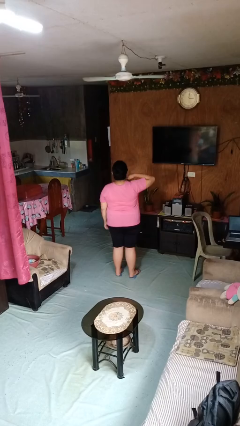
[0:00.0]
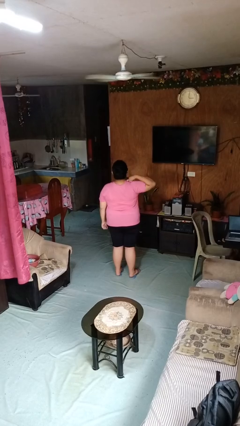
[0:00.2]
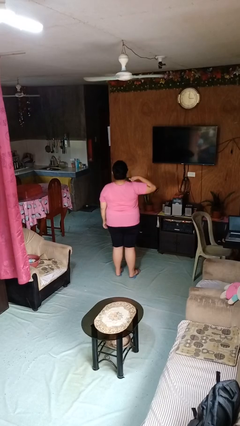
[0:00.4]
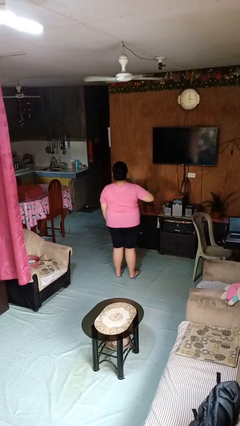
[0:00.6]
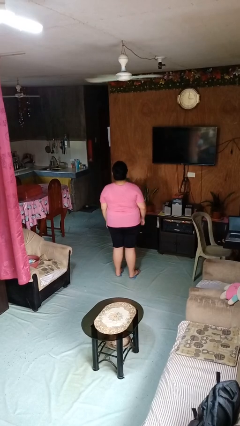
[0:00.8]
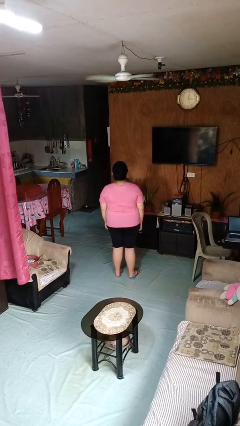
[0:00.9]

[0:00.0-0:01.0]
person gestures cut

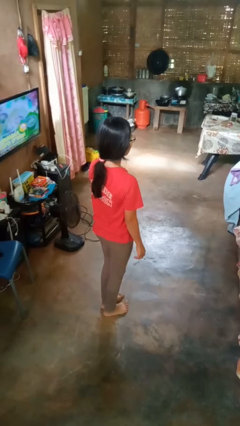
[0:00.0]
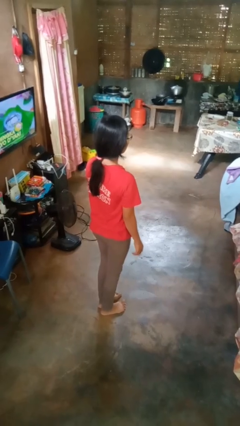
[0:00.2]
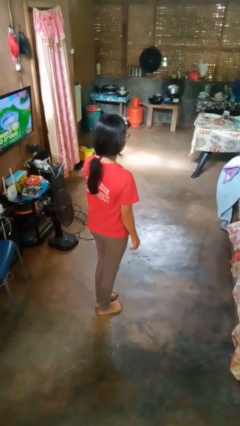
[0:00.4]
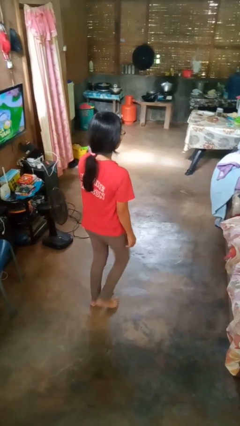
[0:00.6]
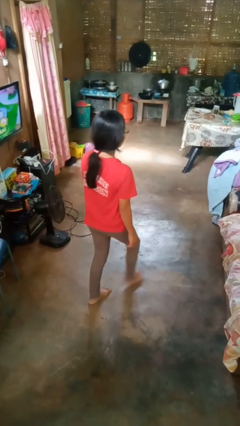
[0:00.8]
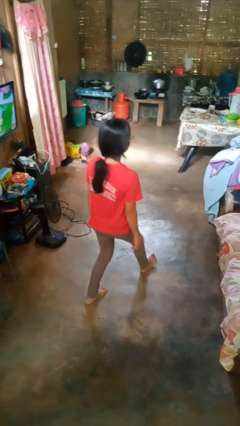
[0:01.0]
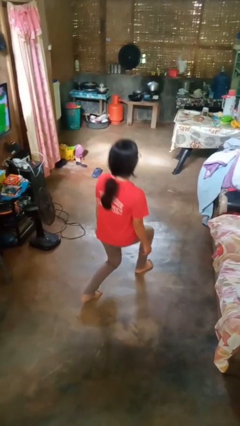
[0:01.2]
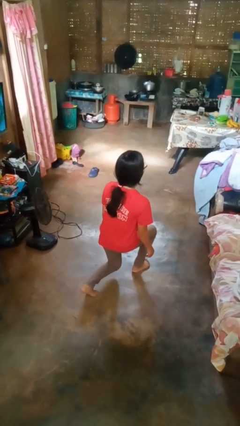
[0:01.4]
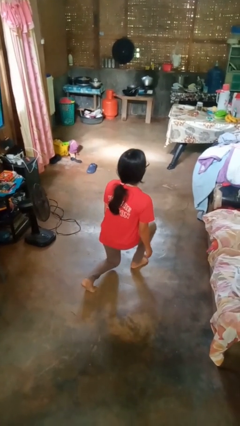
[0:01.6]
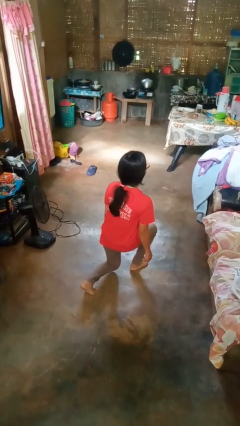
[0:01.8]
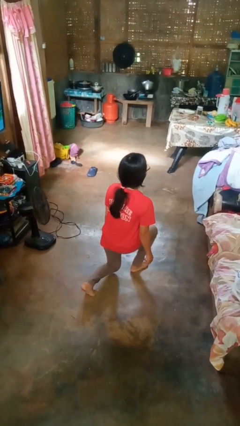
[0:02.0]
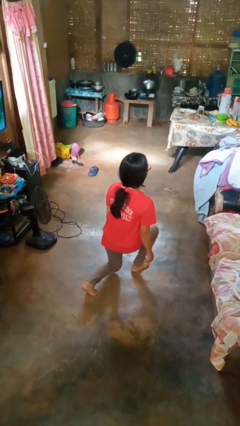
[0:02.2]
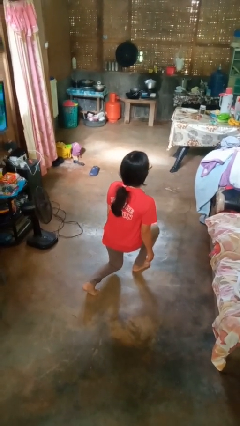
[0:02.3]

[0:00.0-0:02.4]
person exercises with lunges

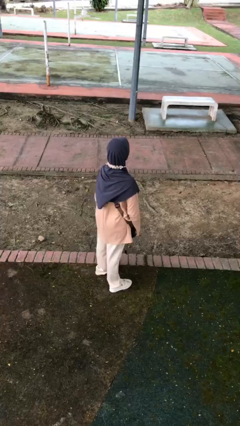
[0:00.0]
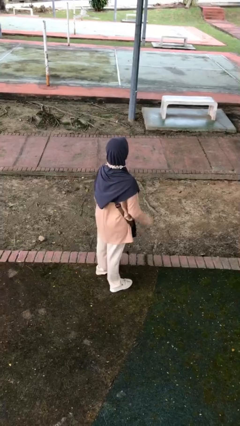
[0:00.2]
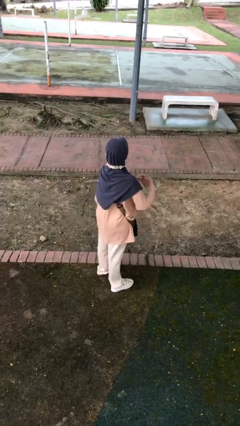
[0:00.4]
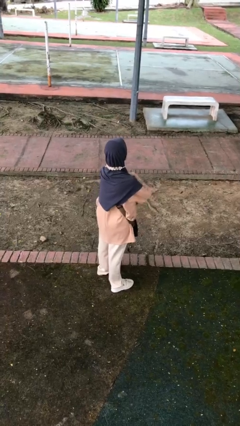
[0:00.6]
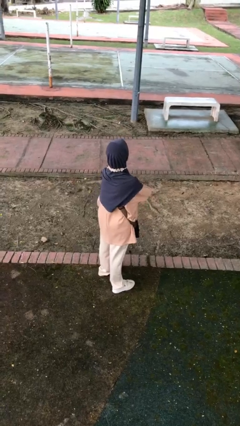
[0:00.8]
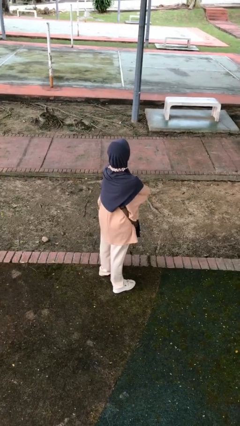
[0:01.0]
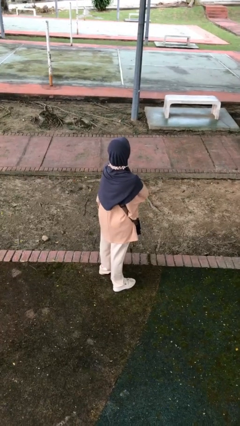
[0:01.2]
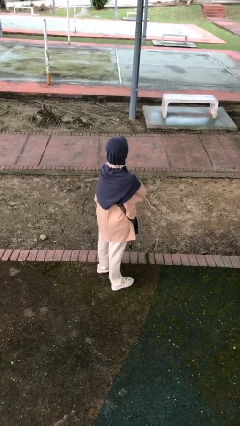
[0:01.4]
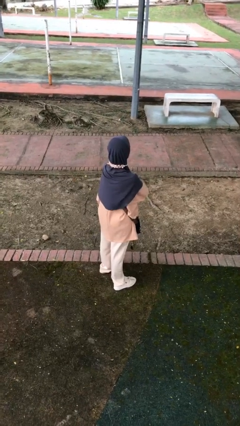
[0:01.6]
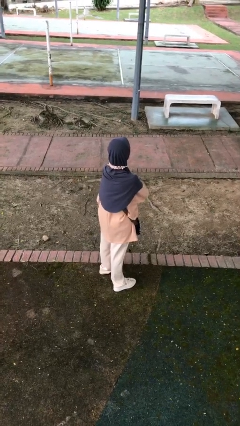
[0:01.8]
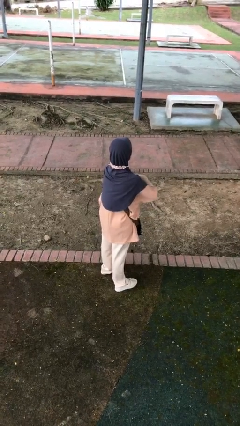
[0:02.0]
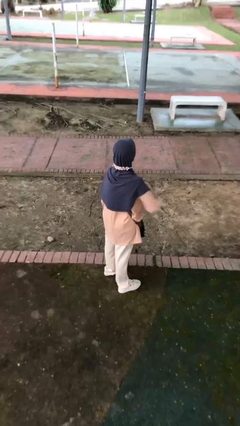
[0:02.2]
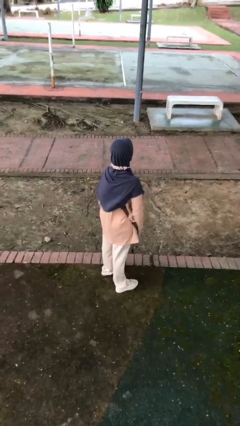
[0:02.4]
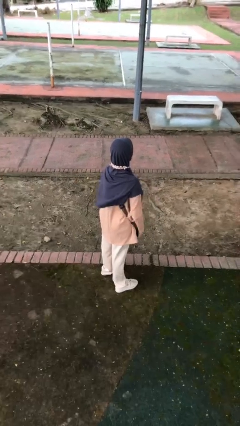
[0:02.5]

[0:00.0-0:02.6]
person crosses arms

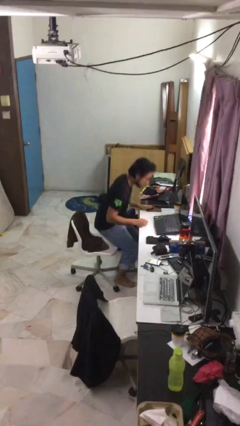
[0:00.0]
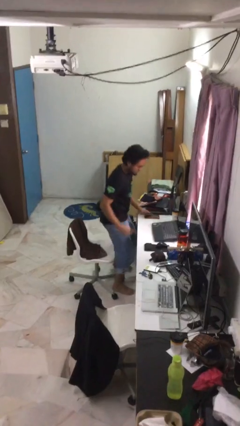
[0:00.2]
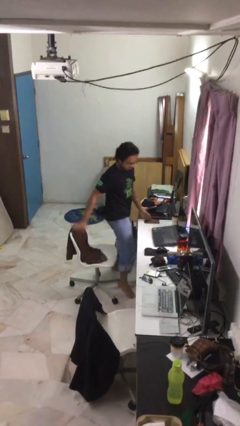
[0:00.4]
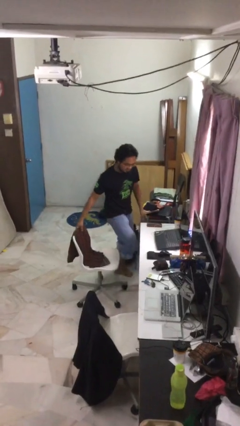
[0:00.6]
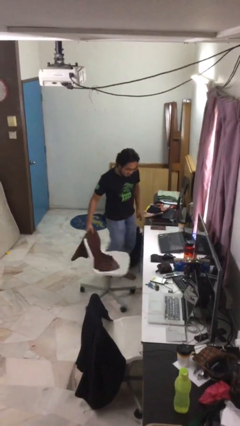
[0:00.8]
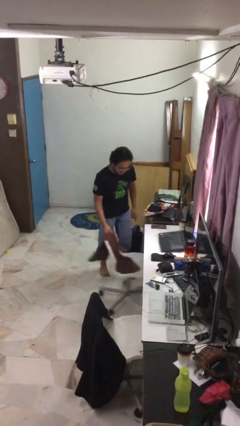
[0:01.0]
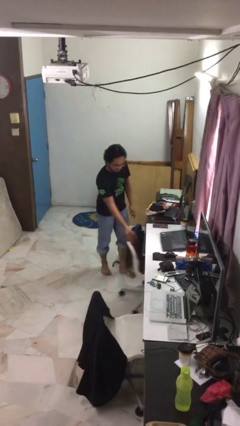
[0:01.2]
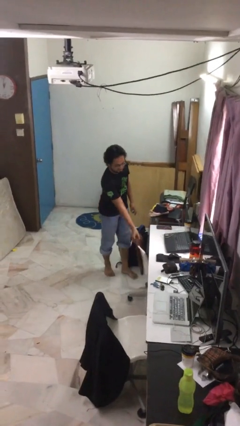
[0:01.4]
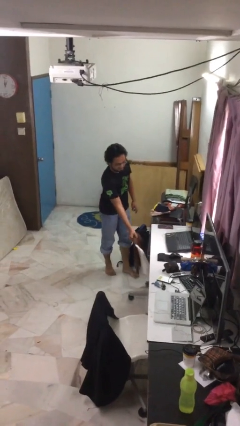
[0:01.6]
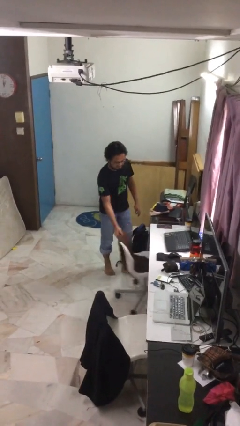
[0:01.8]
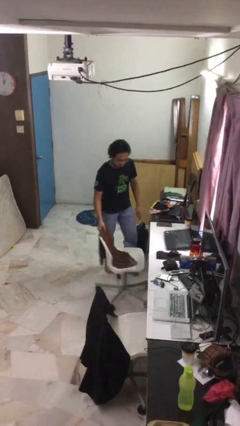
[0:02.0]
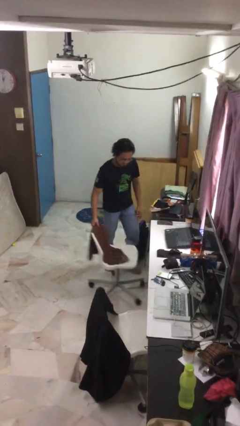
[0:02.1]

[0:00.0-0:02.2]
person stands up

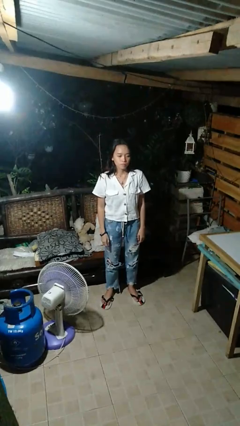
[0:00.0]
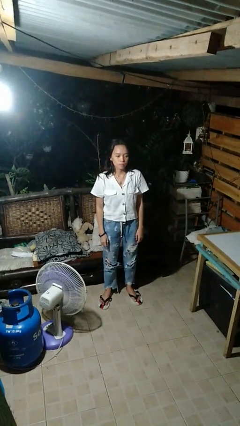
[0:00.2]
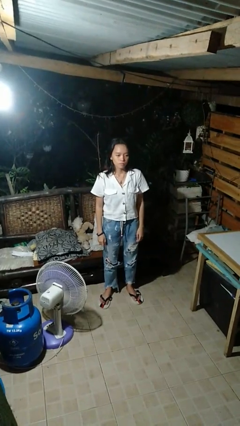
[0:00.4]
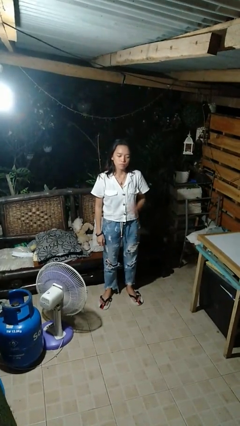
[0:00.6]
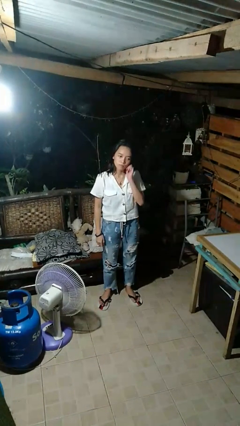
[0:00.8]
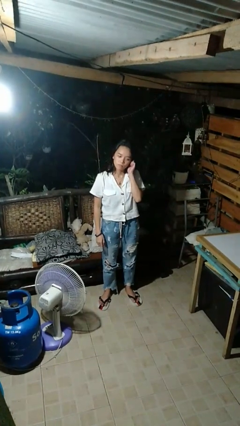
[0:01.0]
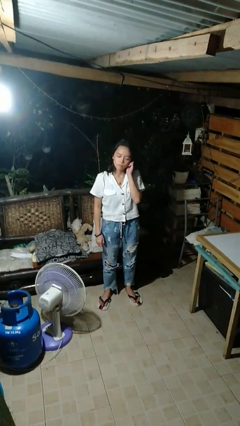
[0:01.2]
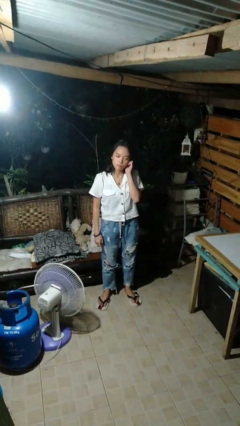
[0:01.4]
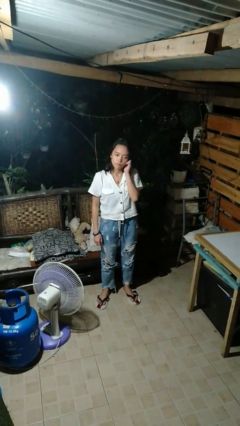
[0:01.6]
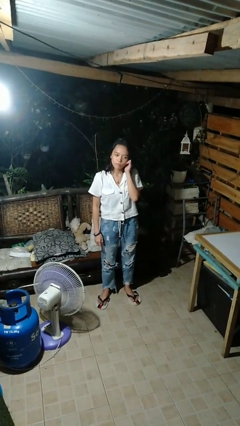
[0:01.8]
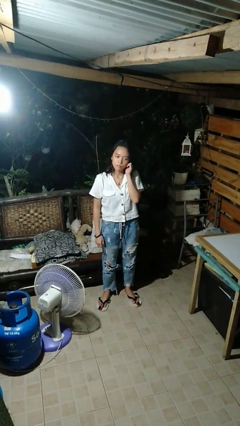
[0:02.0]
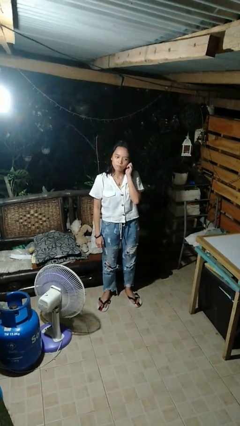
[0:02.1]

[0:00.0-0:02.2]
person touches earlobe

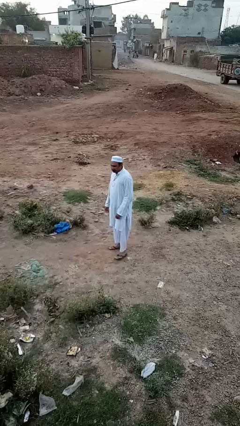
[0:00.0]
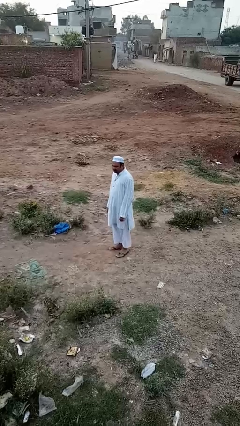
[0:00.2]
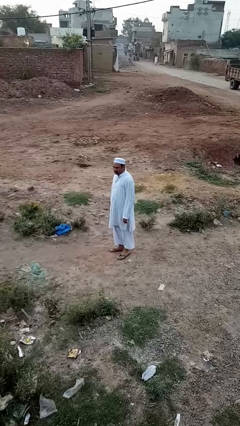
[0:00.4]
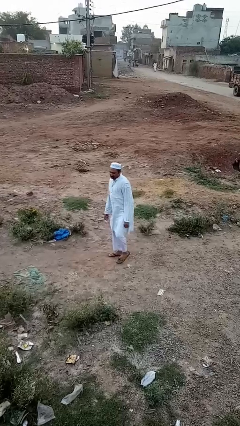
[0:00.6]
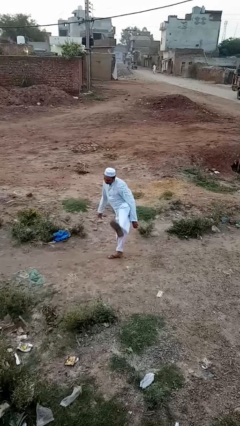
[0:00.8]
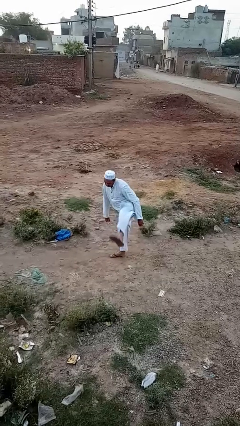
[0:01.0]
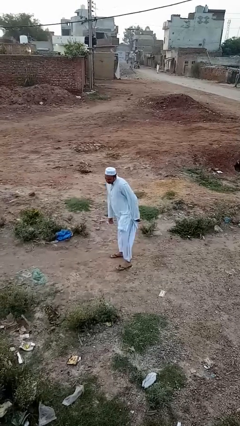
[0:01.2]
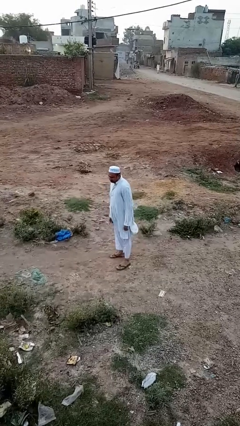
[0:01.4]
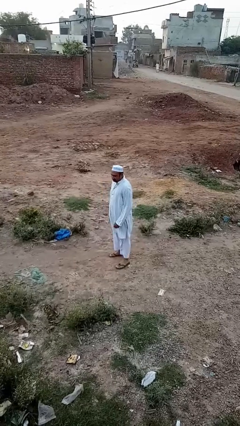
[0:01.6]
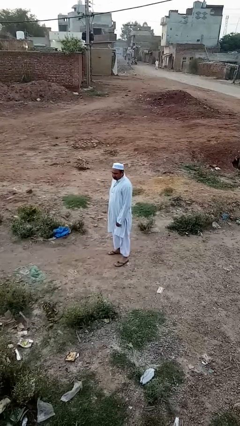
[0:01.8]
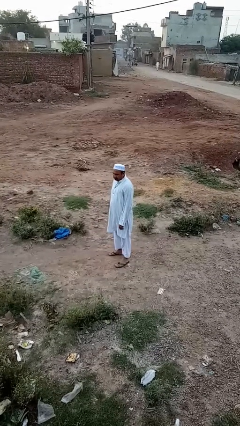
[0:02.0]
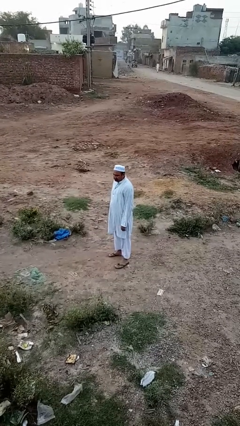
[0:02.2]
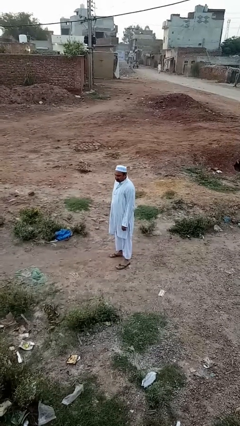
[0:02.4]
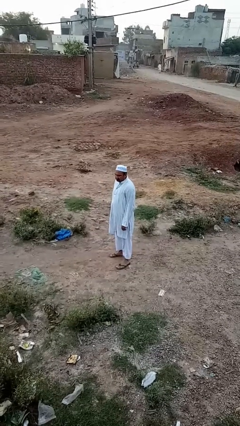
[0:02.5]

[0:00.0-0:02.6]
person karate kicks

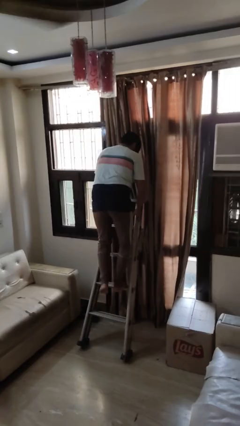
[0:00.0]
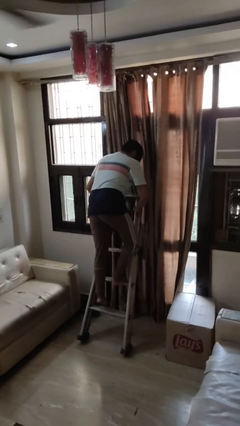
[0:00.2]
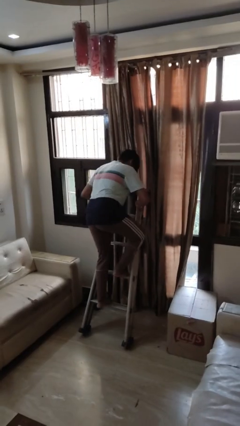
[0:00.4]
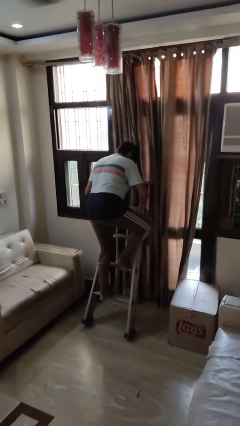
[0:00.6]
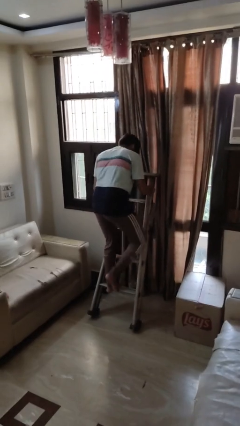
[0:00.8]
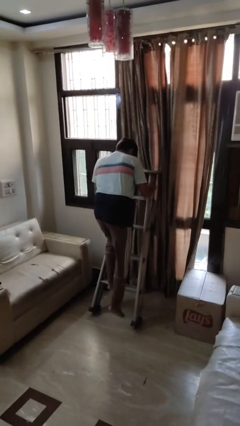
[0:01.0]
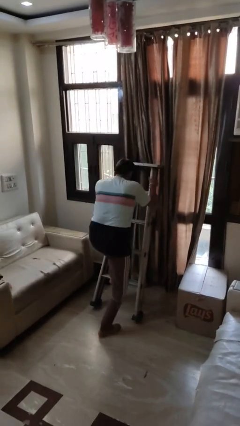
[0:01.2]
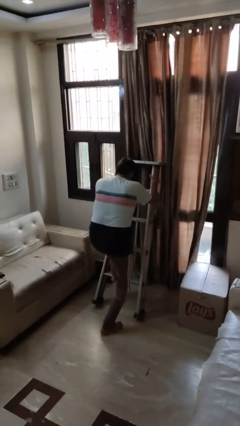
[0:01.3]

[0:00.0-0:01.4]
person climbs down ladder

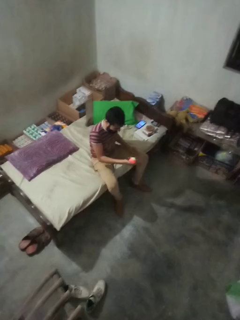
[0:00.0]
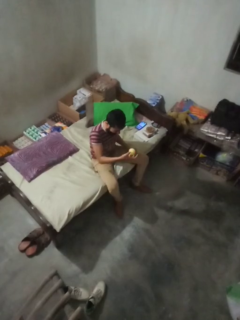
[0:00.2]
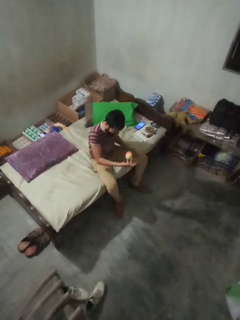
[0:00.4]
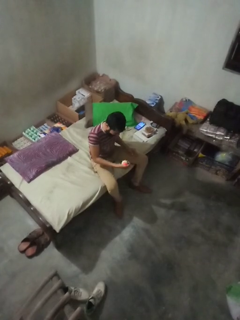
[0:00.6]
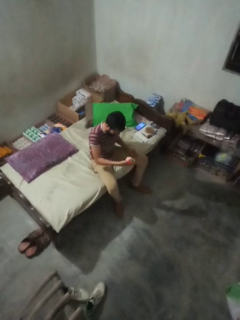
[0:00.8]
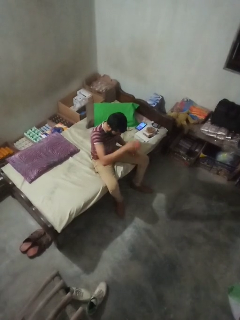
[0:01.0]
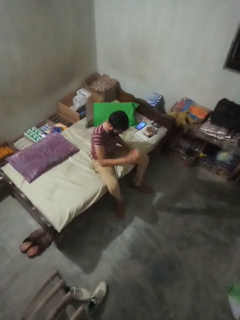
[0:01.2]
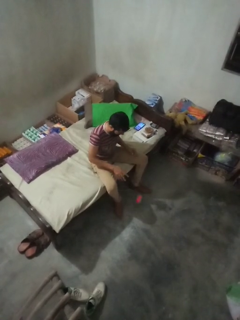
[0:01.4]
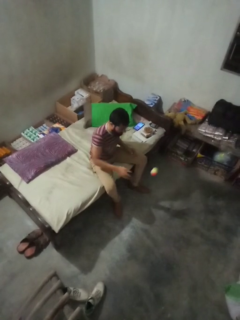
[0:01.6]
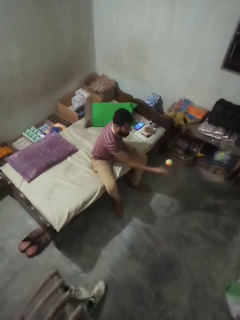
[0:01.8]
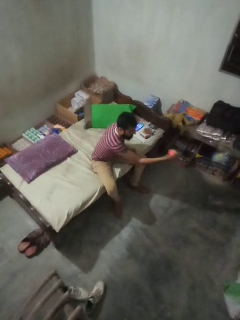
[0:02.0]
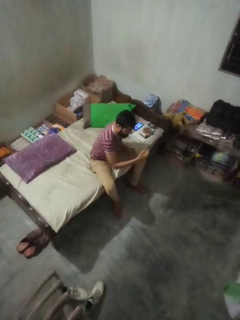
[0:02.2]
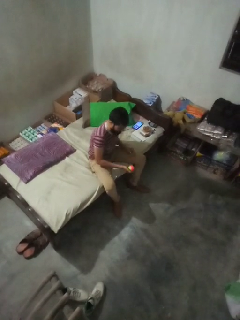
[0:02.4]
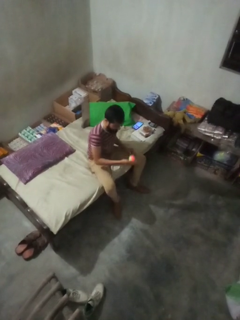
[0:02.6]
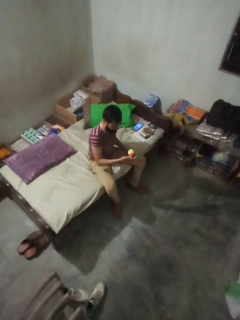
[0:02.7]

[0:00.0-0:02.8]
person bounces ball on floor

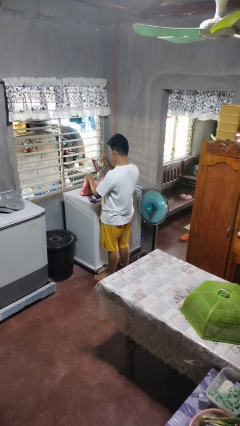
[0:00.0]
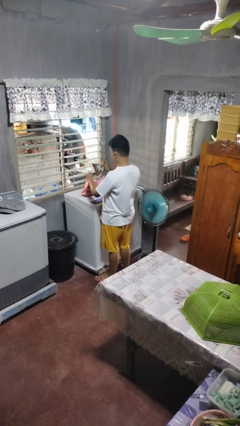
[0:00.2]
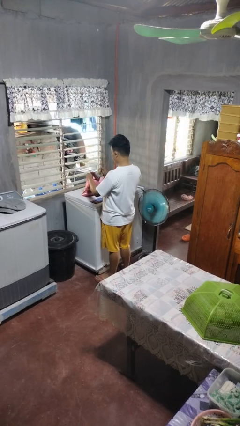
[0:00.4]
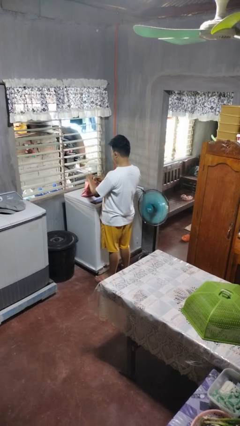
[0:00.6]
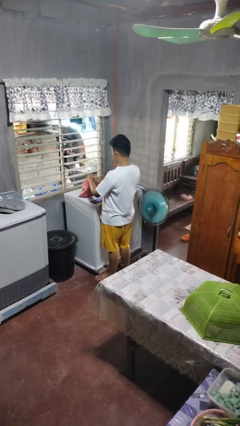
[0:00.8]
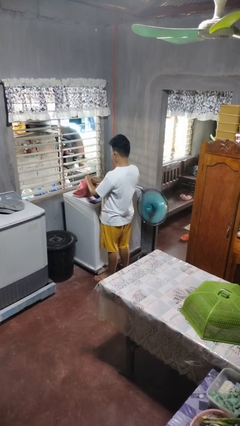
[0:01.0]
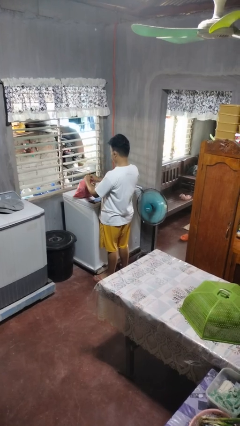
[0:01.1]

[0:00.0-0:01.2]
person puts object into bag
